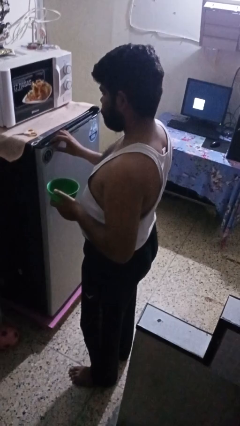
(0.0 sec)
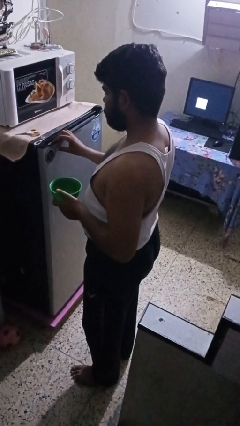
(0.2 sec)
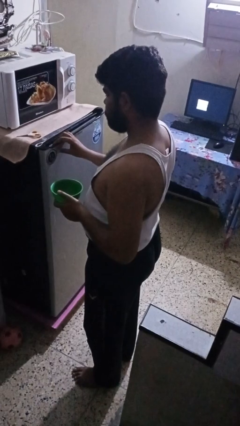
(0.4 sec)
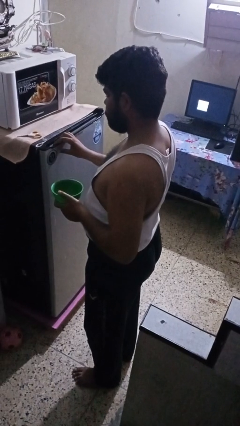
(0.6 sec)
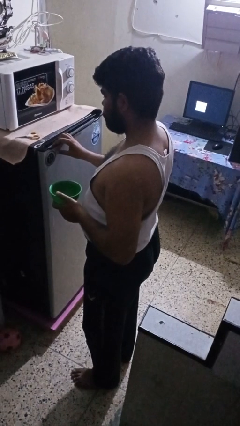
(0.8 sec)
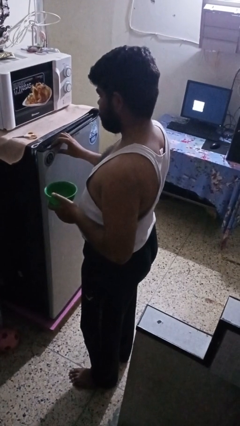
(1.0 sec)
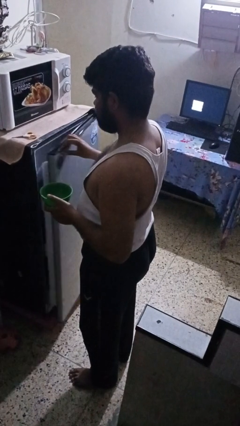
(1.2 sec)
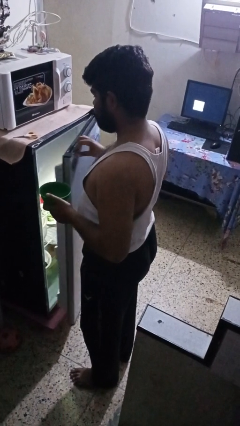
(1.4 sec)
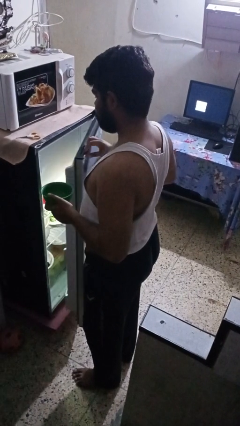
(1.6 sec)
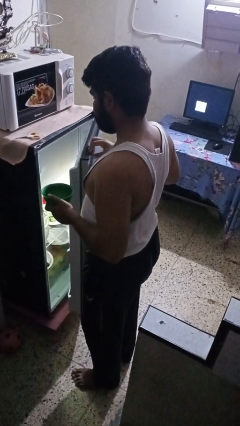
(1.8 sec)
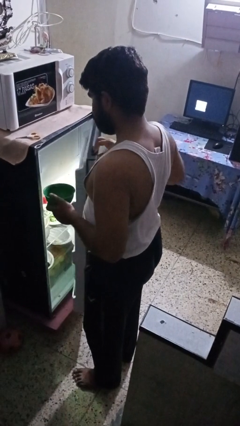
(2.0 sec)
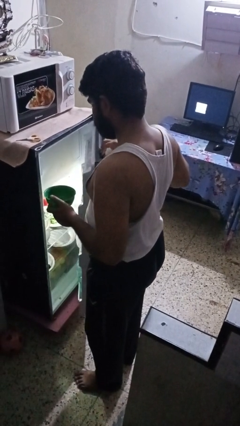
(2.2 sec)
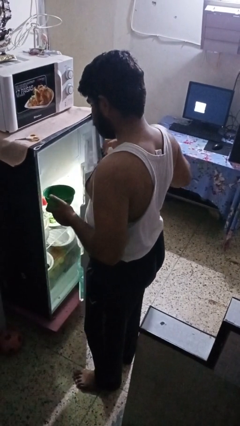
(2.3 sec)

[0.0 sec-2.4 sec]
person opens refrigerator

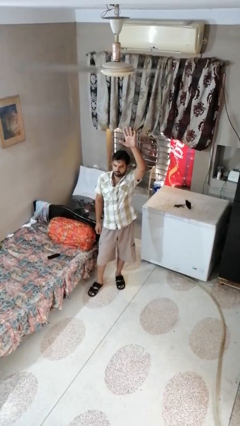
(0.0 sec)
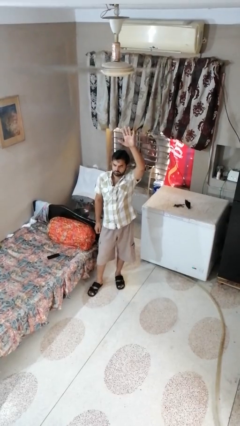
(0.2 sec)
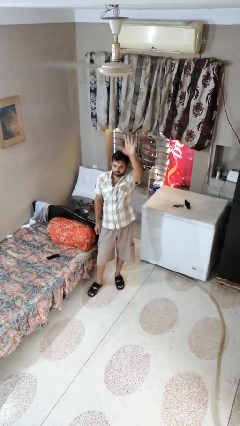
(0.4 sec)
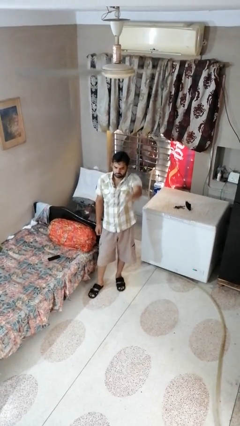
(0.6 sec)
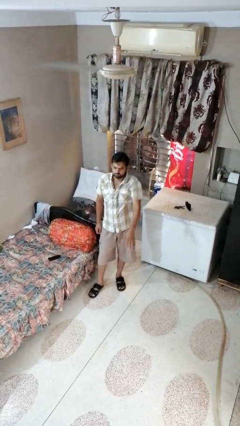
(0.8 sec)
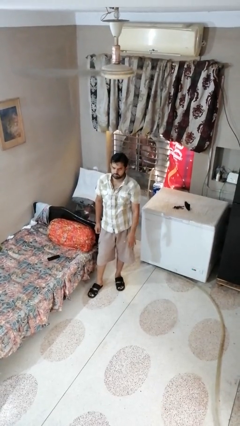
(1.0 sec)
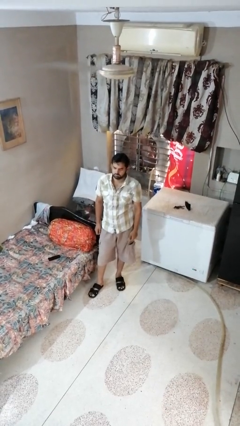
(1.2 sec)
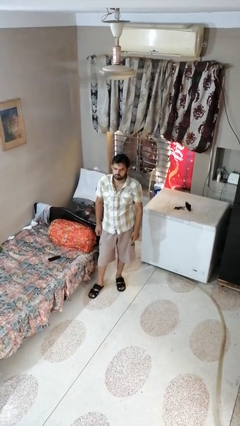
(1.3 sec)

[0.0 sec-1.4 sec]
person gestures swipe down

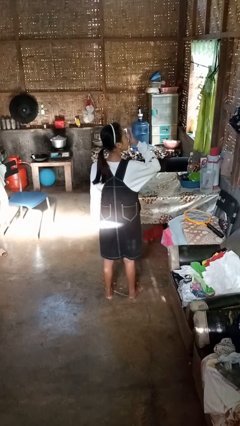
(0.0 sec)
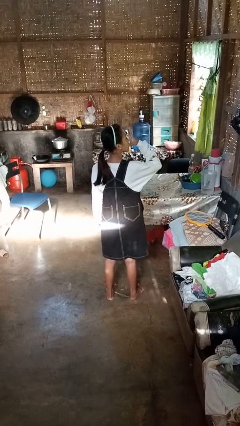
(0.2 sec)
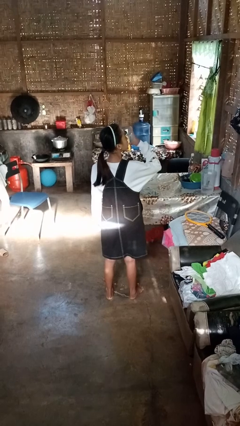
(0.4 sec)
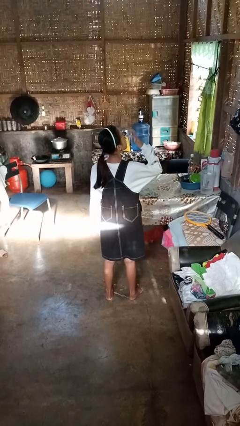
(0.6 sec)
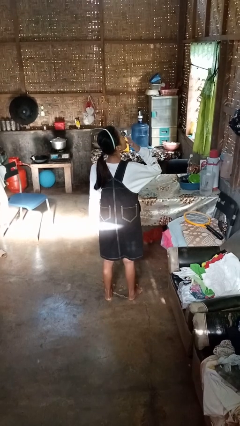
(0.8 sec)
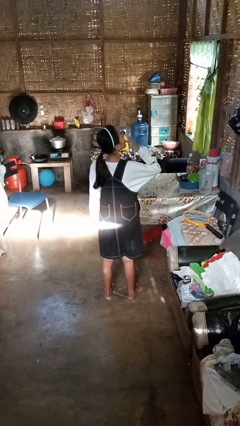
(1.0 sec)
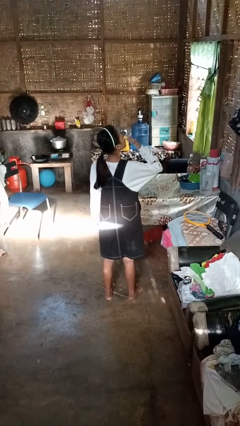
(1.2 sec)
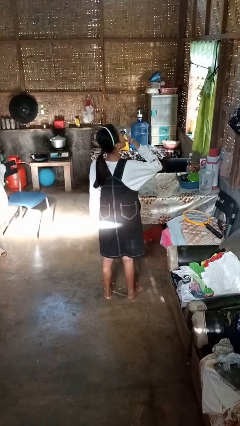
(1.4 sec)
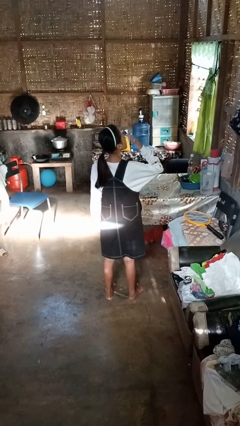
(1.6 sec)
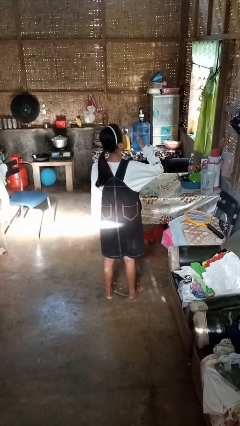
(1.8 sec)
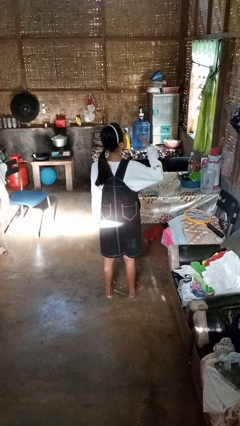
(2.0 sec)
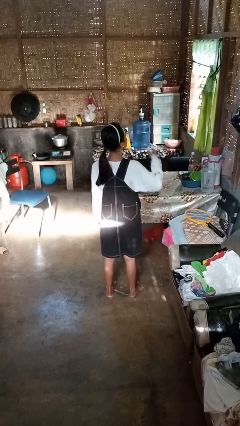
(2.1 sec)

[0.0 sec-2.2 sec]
person licks fingers

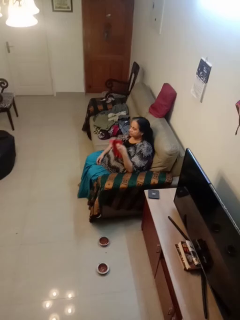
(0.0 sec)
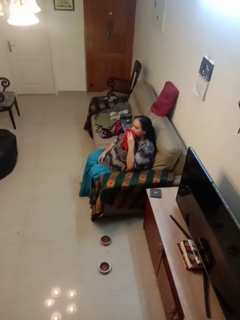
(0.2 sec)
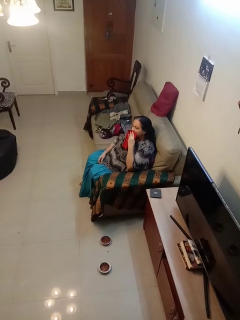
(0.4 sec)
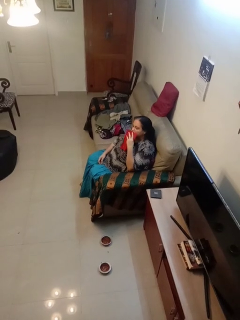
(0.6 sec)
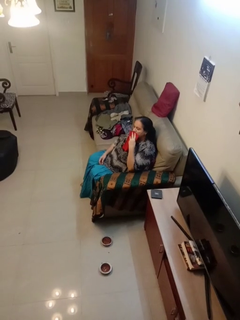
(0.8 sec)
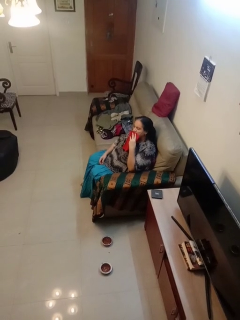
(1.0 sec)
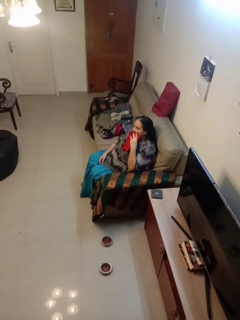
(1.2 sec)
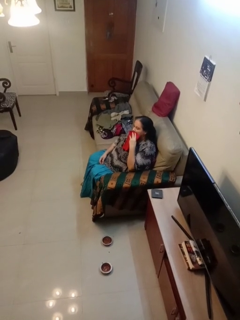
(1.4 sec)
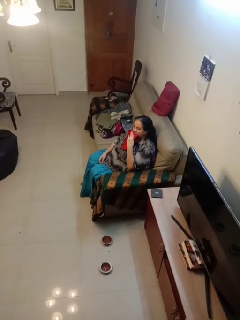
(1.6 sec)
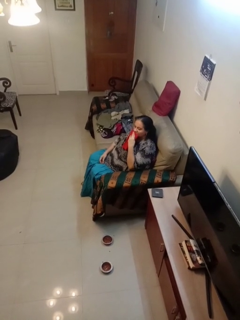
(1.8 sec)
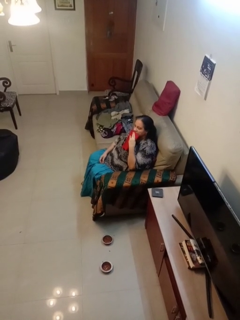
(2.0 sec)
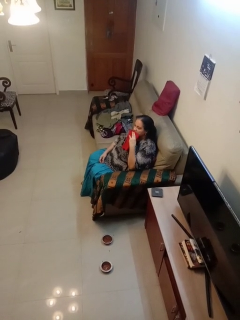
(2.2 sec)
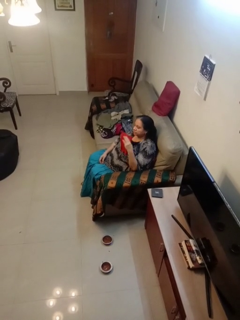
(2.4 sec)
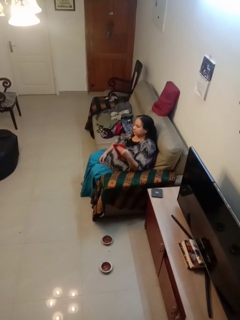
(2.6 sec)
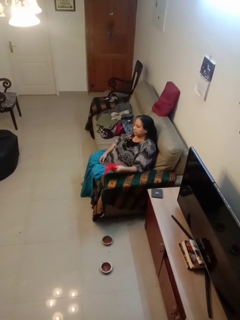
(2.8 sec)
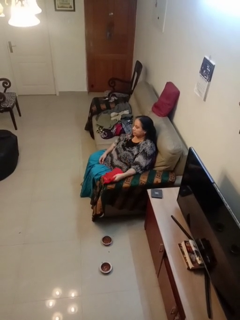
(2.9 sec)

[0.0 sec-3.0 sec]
person wipes mouth with napkin

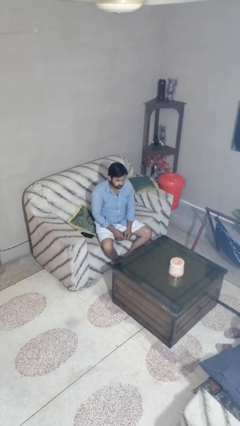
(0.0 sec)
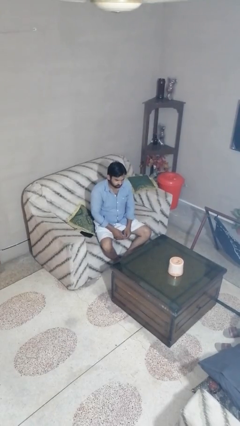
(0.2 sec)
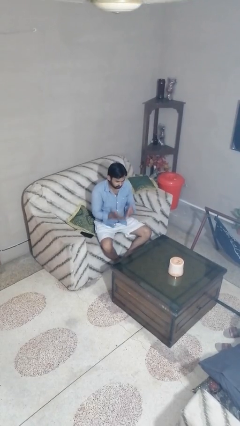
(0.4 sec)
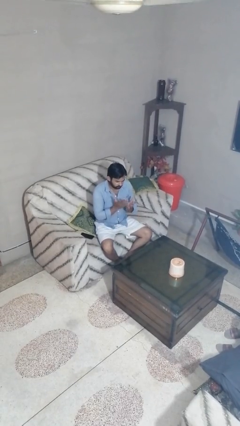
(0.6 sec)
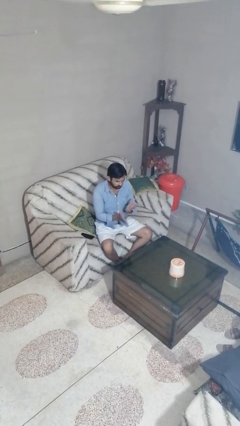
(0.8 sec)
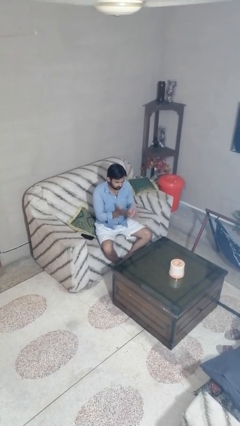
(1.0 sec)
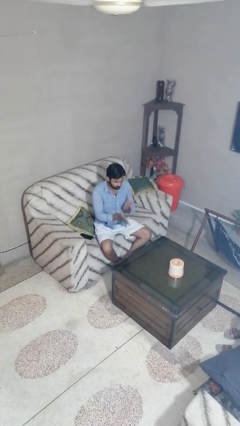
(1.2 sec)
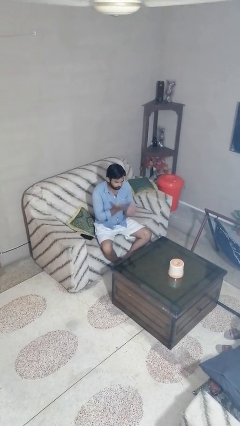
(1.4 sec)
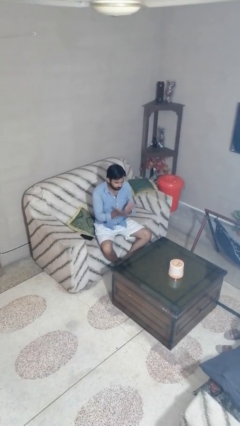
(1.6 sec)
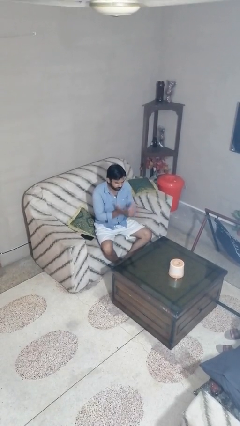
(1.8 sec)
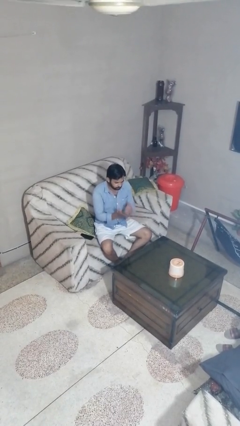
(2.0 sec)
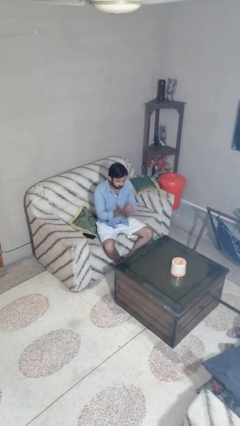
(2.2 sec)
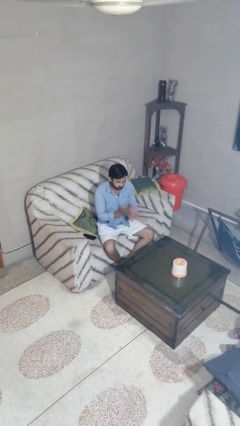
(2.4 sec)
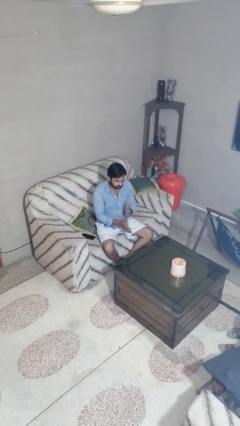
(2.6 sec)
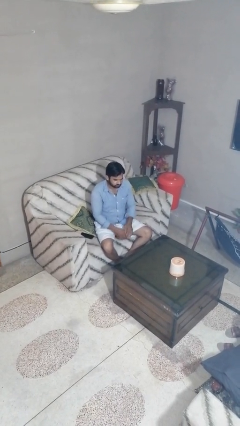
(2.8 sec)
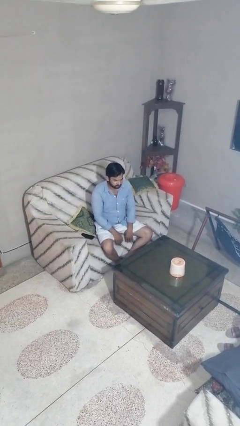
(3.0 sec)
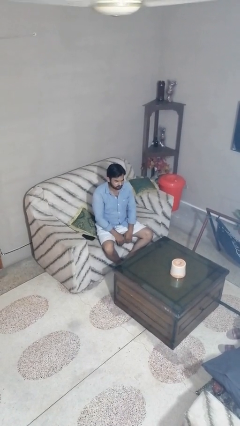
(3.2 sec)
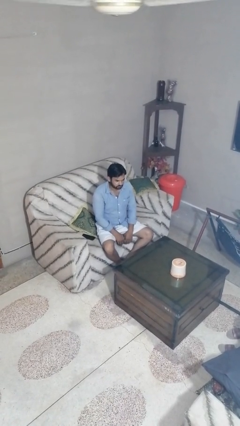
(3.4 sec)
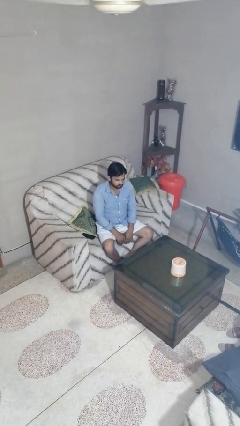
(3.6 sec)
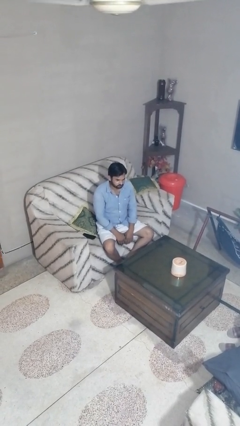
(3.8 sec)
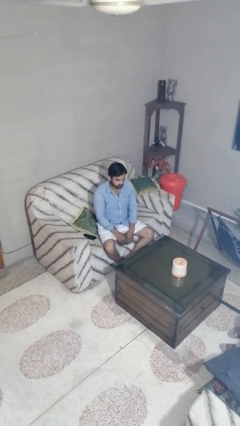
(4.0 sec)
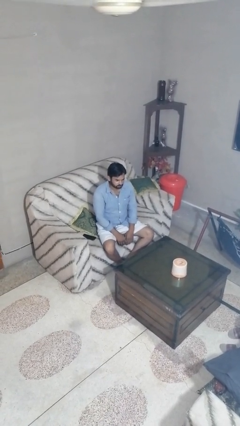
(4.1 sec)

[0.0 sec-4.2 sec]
person blows into hands

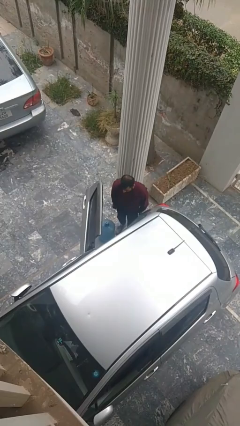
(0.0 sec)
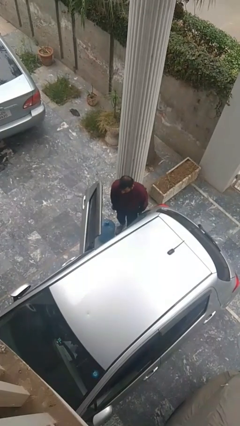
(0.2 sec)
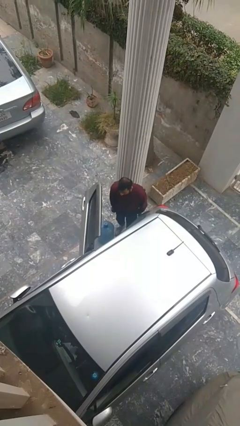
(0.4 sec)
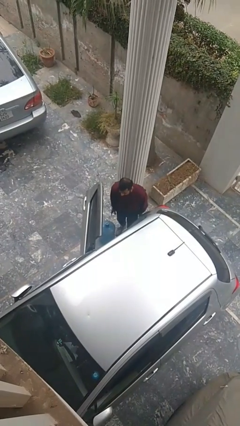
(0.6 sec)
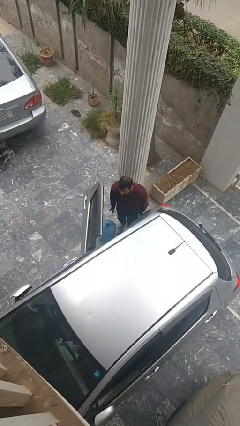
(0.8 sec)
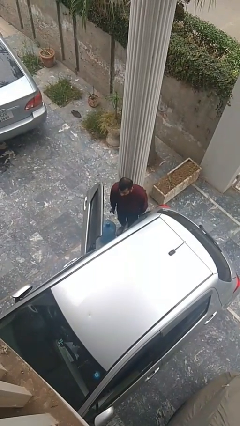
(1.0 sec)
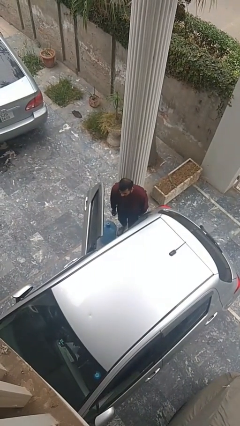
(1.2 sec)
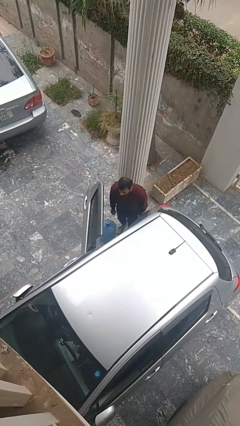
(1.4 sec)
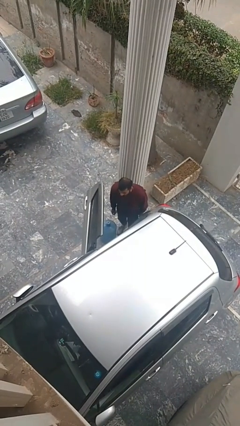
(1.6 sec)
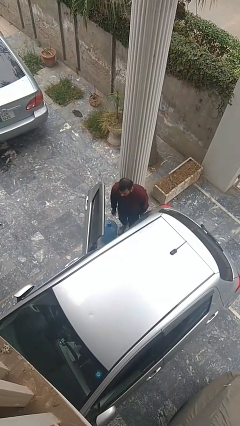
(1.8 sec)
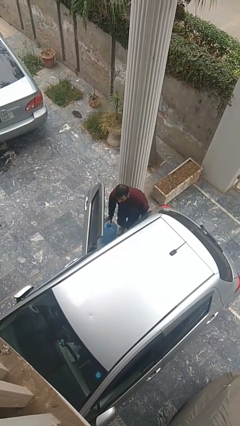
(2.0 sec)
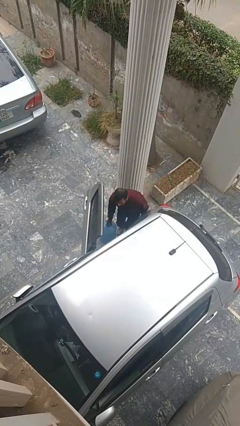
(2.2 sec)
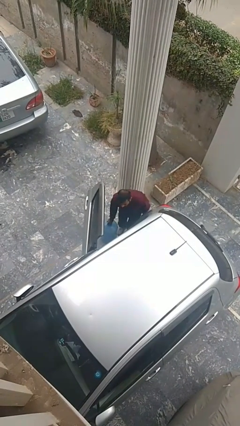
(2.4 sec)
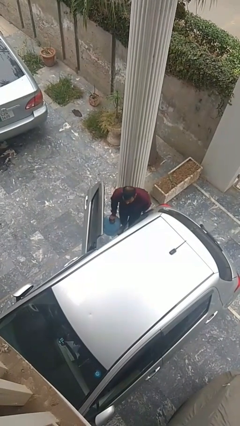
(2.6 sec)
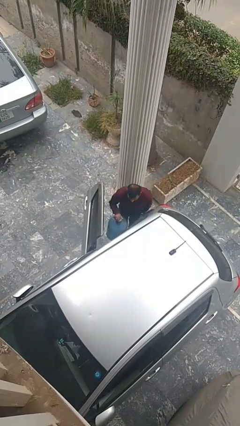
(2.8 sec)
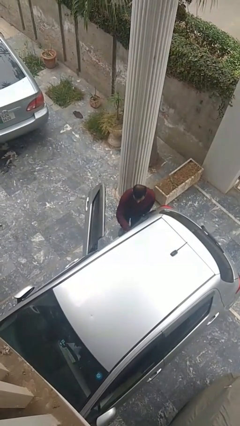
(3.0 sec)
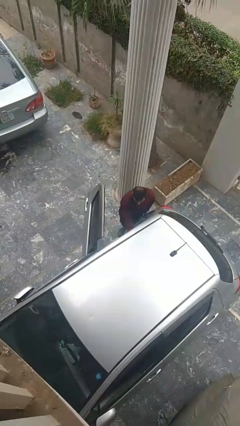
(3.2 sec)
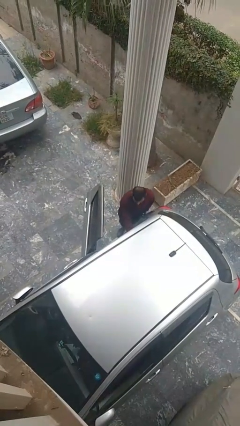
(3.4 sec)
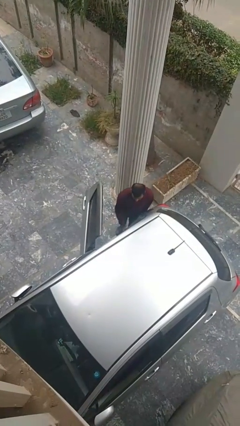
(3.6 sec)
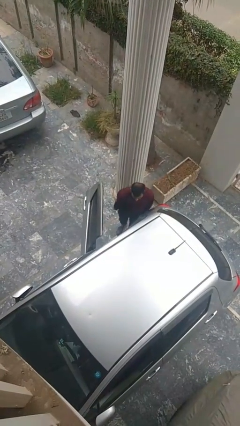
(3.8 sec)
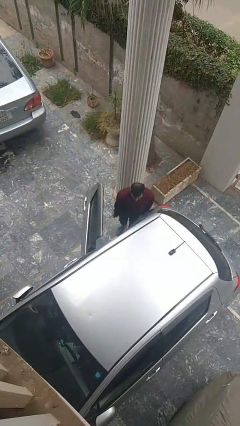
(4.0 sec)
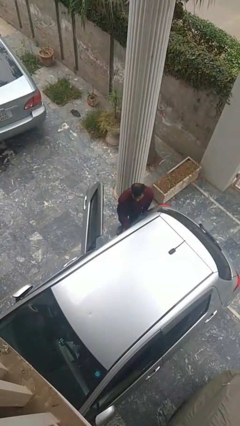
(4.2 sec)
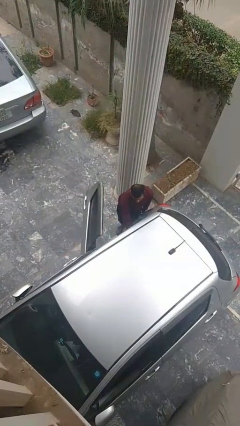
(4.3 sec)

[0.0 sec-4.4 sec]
person loads car

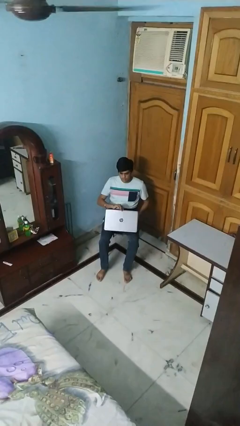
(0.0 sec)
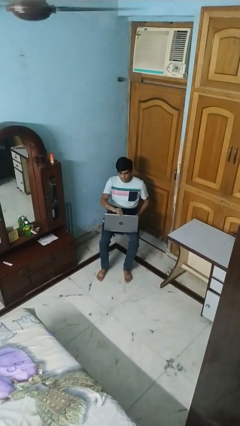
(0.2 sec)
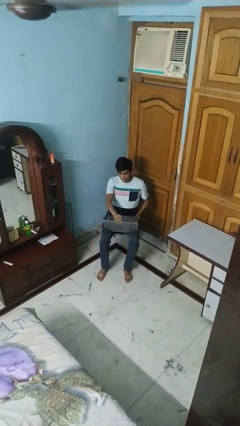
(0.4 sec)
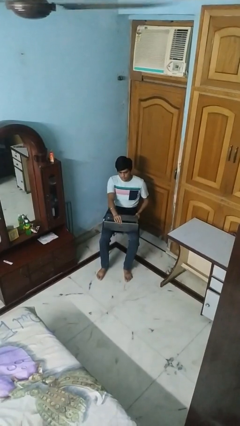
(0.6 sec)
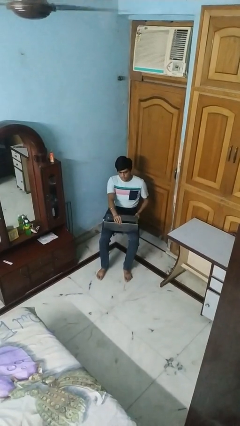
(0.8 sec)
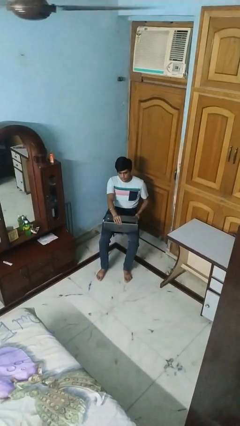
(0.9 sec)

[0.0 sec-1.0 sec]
person opens laptop
